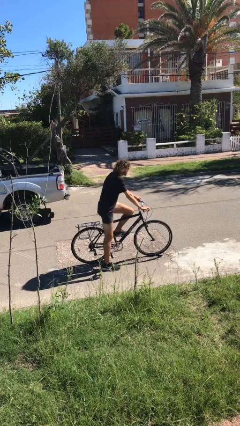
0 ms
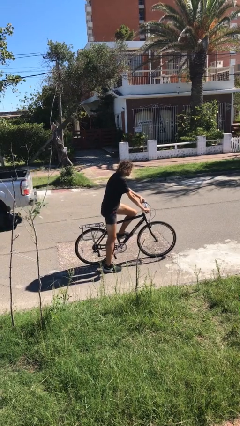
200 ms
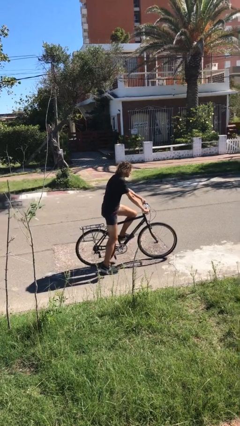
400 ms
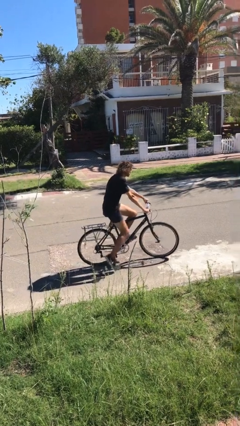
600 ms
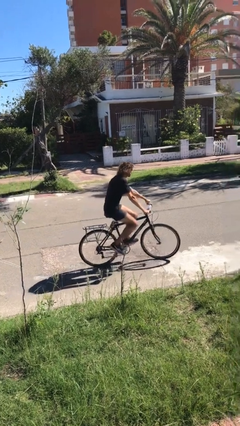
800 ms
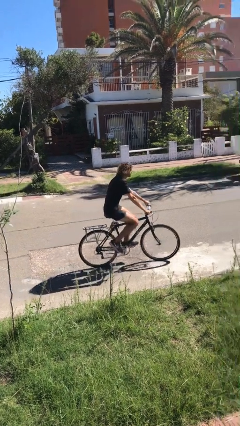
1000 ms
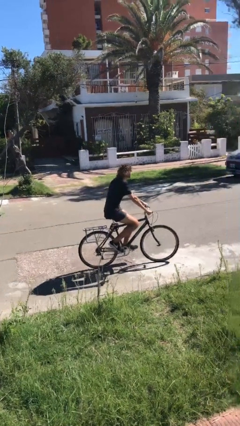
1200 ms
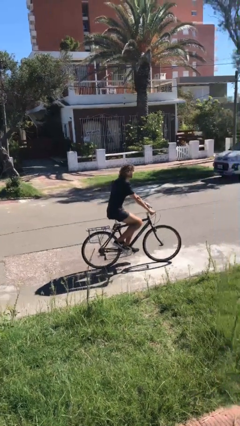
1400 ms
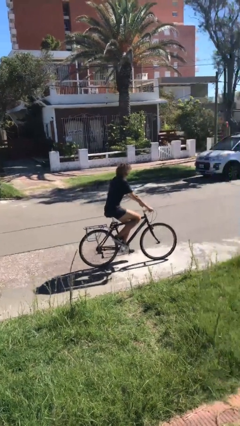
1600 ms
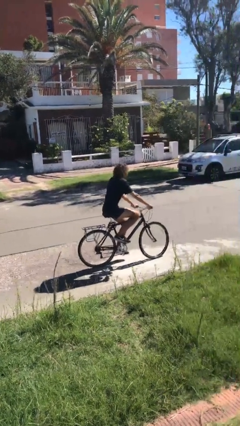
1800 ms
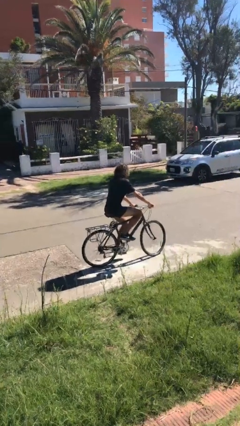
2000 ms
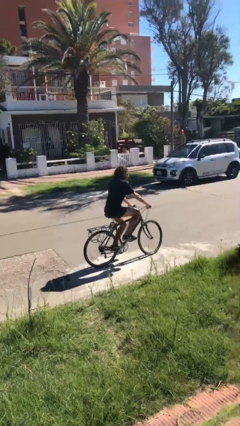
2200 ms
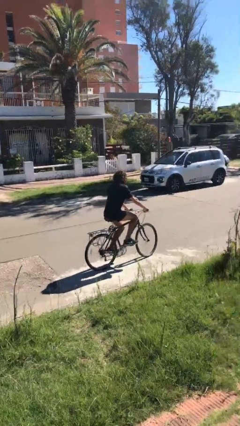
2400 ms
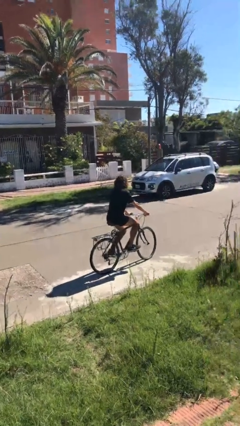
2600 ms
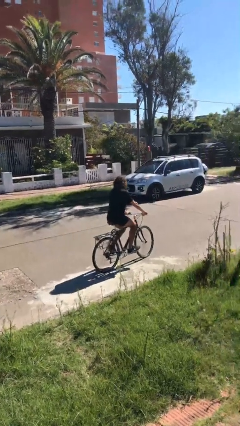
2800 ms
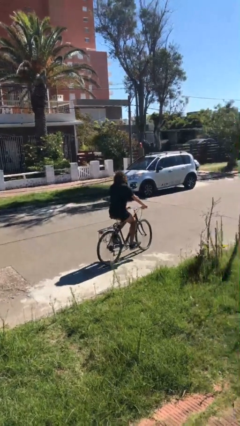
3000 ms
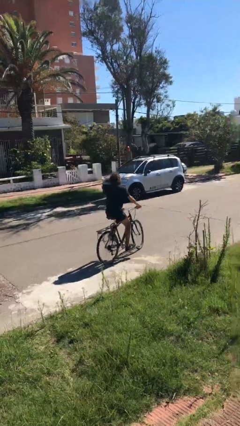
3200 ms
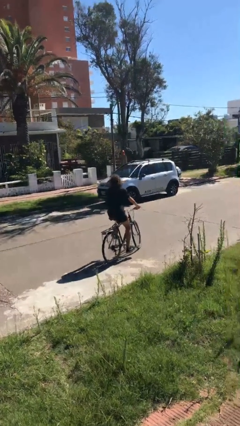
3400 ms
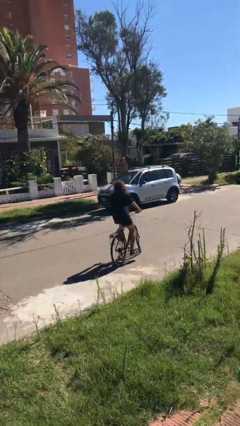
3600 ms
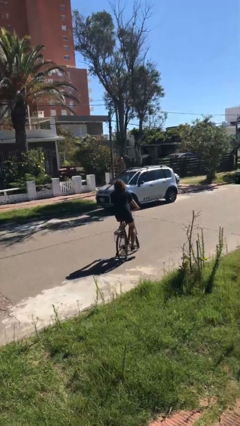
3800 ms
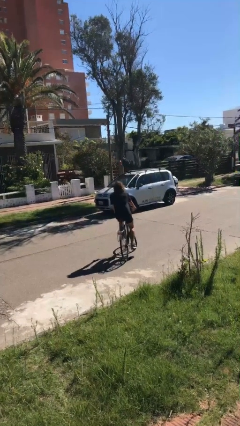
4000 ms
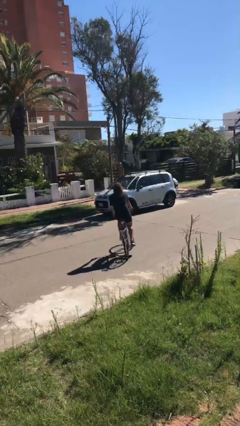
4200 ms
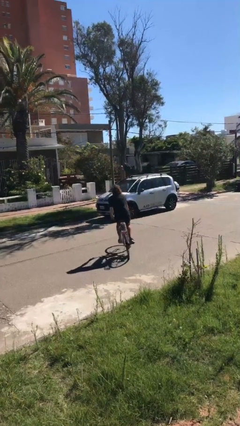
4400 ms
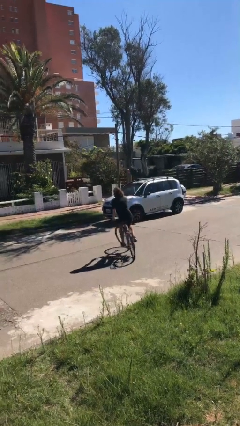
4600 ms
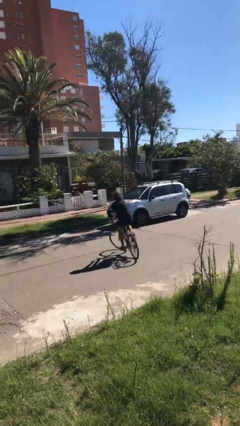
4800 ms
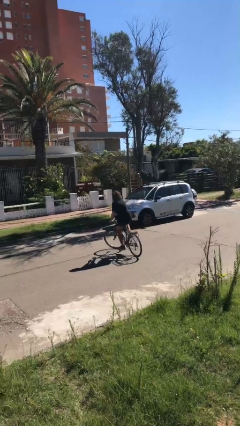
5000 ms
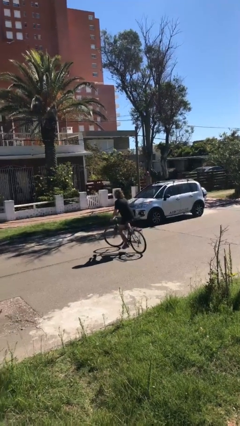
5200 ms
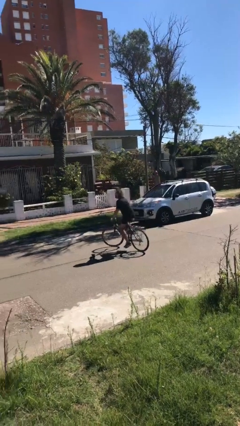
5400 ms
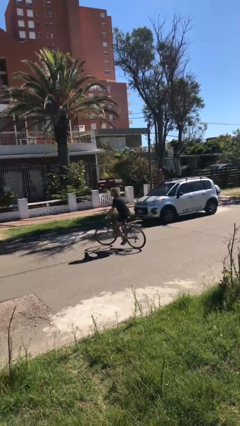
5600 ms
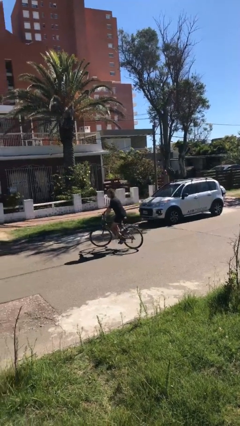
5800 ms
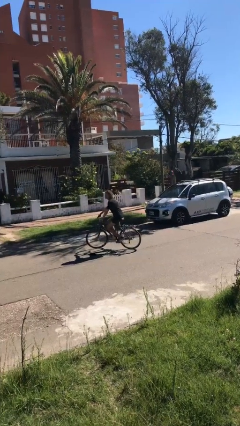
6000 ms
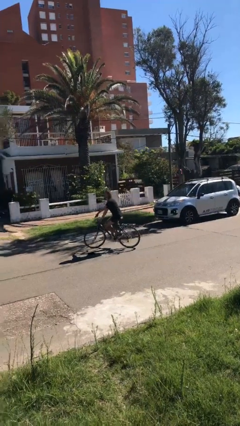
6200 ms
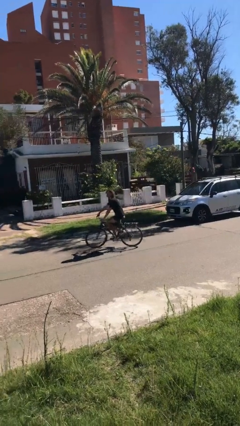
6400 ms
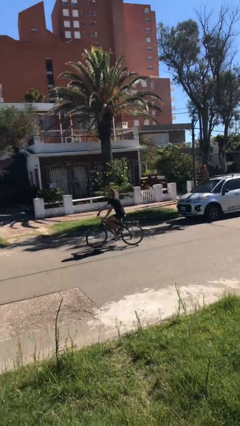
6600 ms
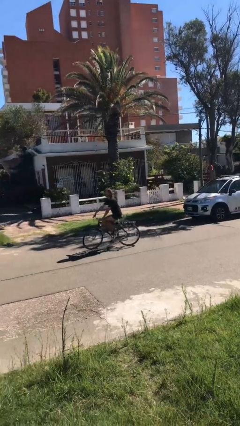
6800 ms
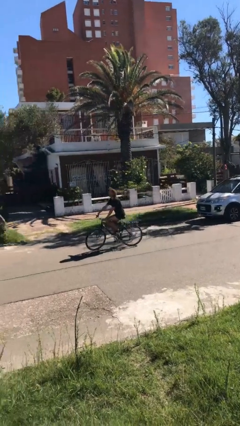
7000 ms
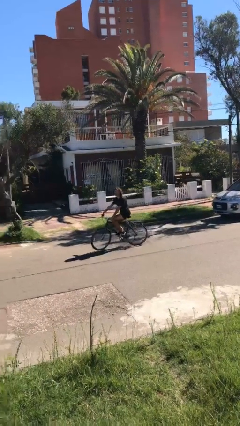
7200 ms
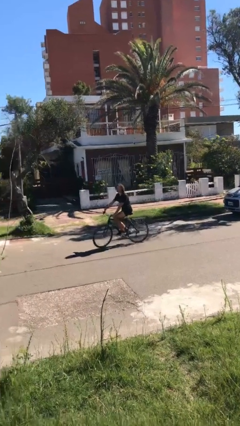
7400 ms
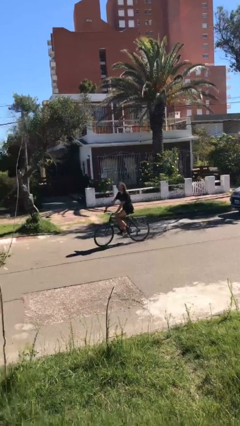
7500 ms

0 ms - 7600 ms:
person rides bicycle

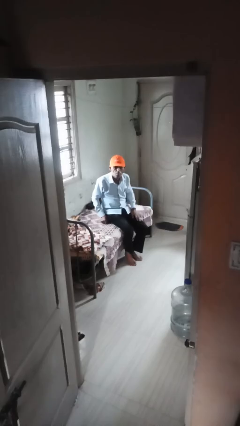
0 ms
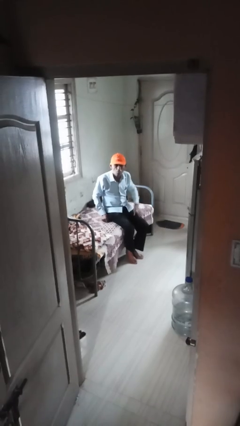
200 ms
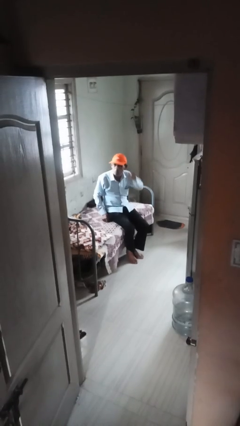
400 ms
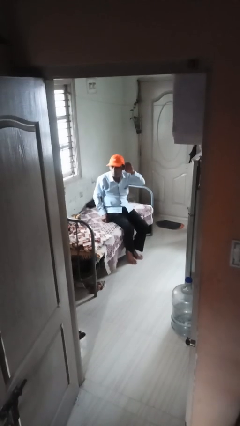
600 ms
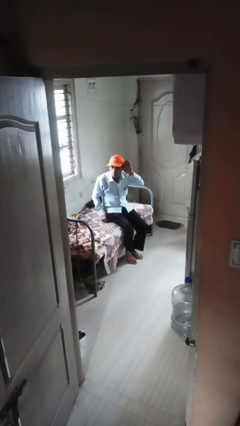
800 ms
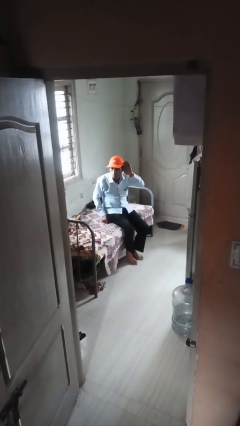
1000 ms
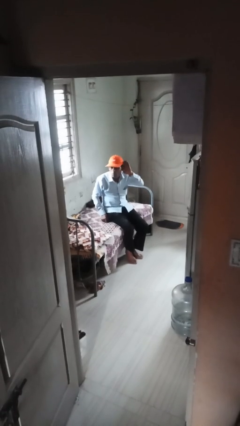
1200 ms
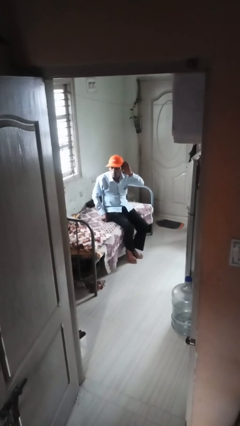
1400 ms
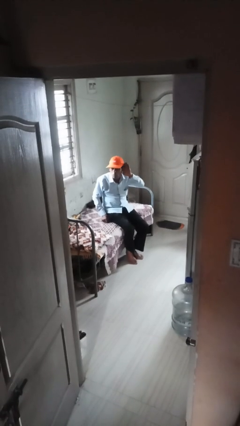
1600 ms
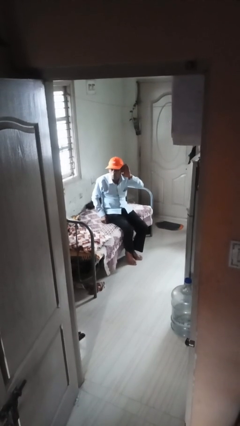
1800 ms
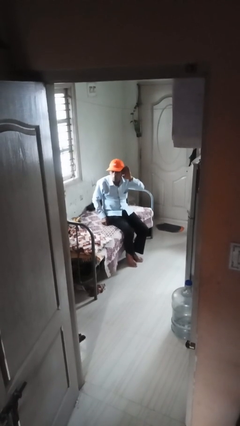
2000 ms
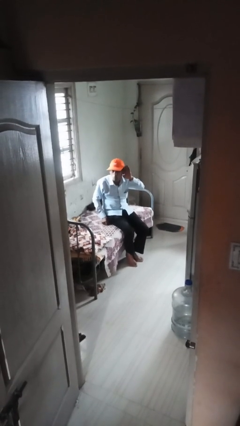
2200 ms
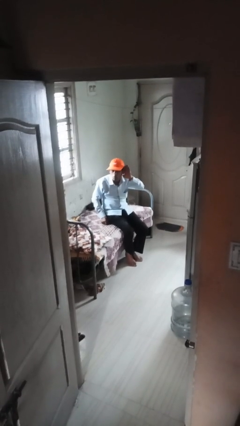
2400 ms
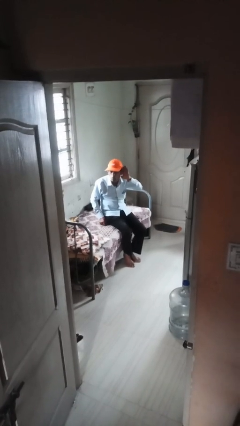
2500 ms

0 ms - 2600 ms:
person gestures listen closely

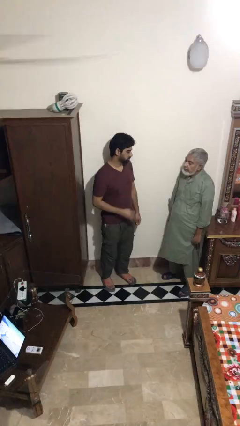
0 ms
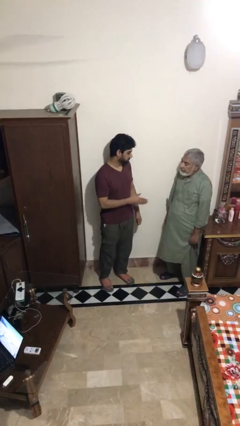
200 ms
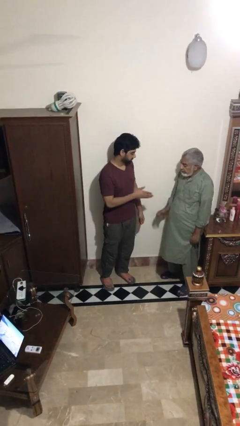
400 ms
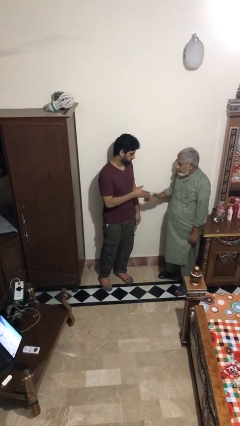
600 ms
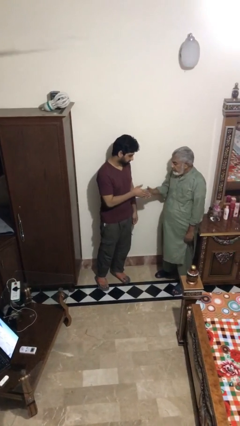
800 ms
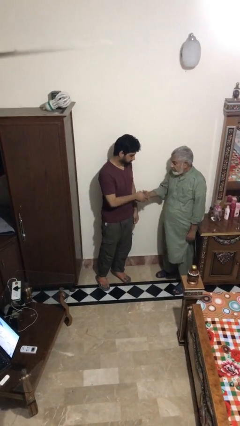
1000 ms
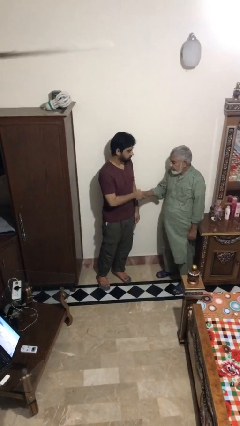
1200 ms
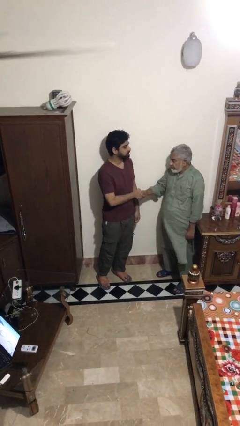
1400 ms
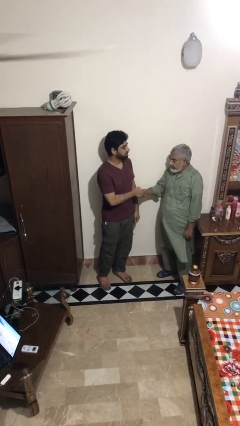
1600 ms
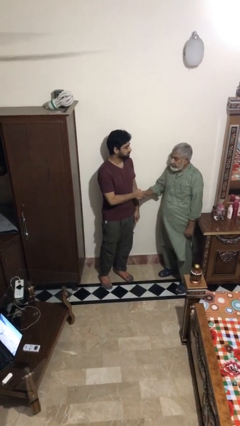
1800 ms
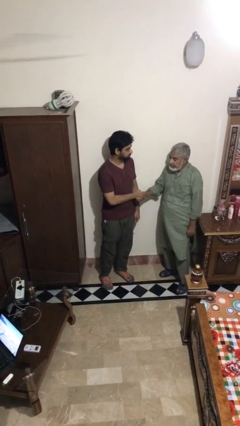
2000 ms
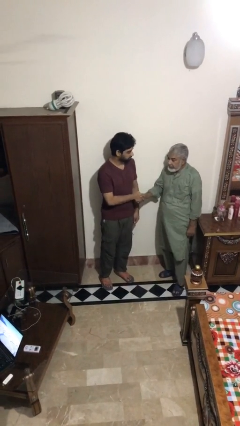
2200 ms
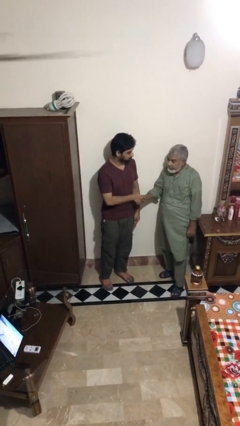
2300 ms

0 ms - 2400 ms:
person shakes hand

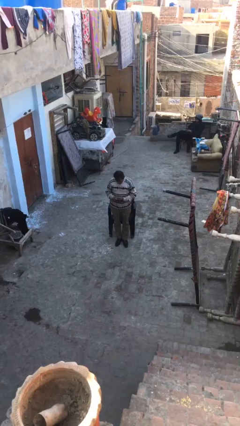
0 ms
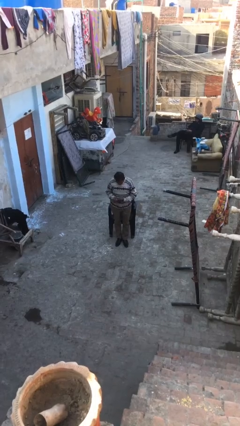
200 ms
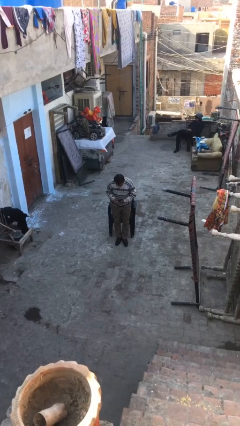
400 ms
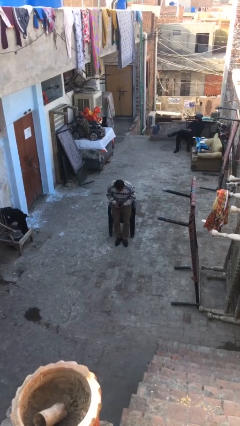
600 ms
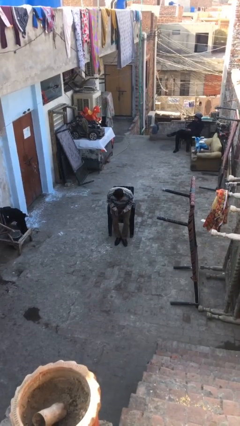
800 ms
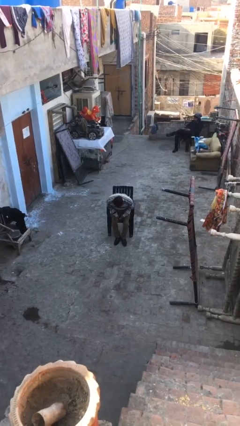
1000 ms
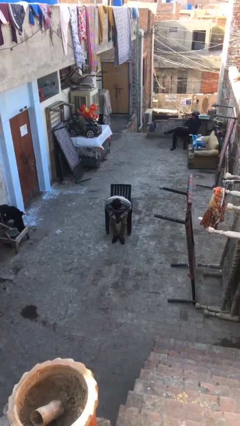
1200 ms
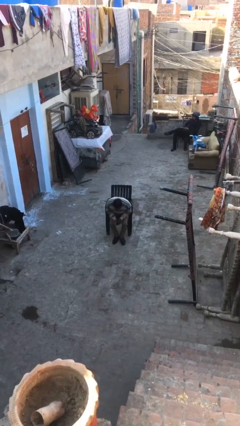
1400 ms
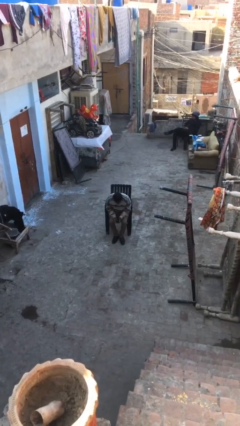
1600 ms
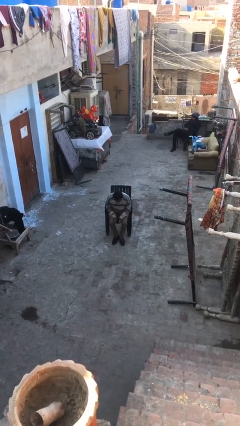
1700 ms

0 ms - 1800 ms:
person sits down

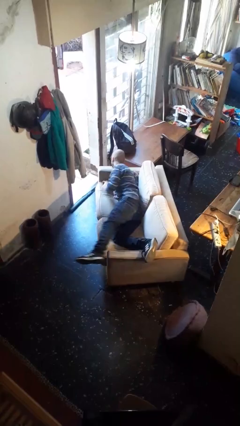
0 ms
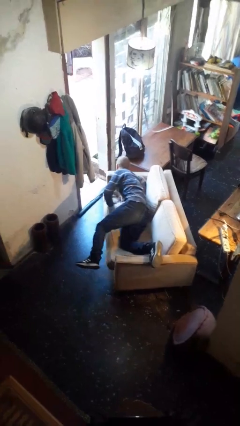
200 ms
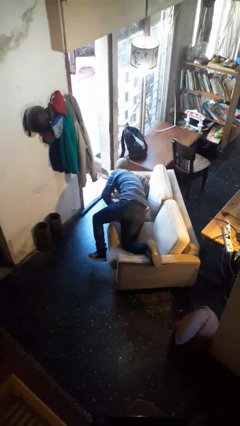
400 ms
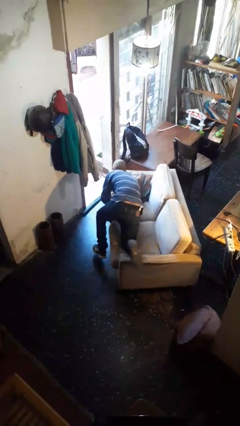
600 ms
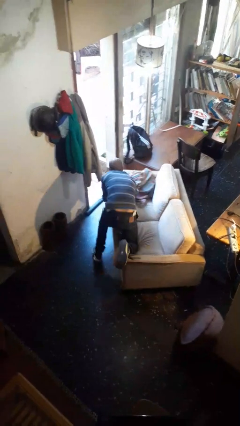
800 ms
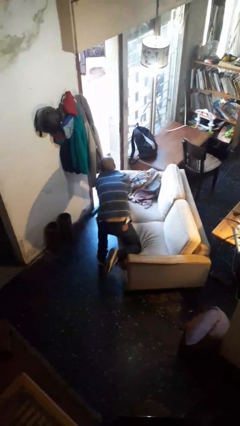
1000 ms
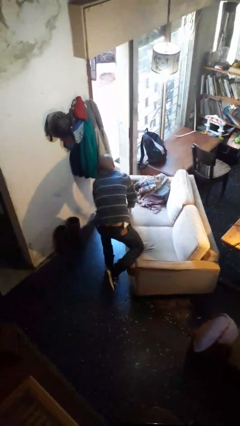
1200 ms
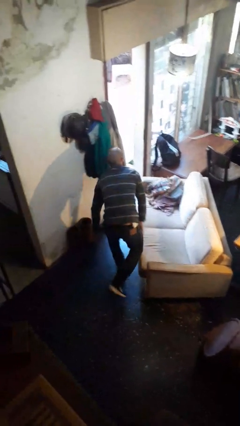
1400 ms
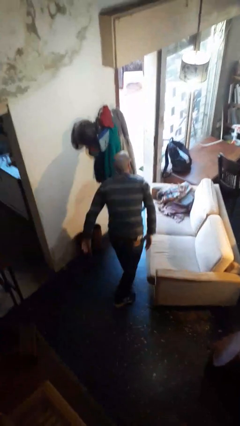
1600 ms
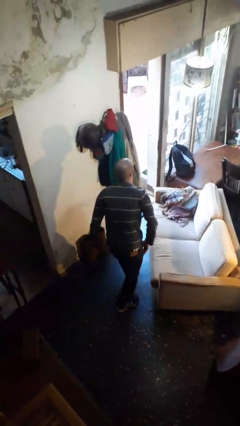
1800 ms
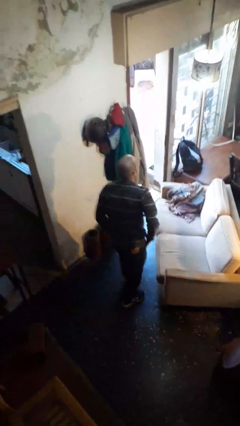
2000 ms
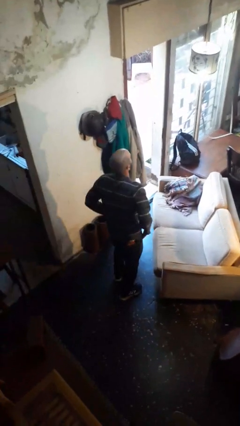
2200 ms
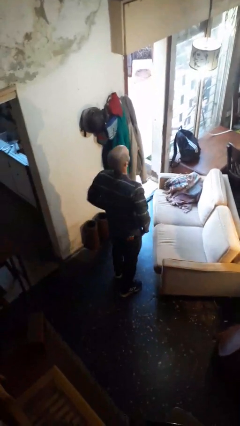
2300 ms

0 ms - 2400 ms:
person stands up

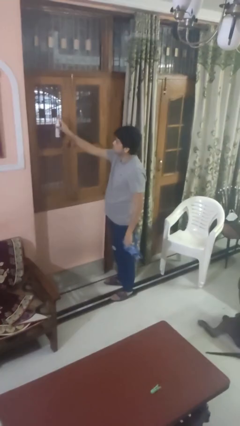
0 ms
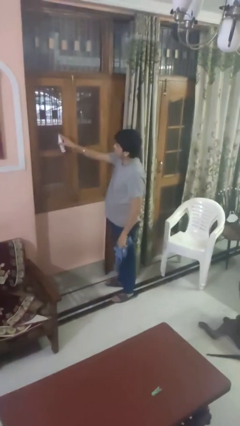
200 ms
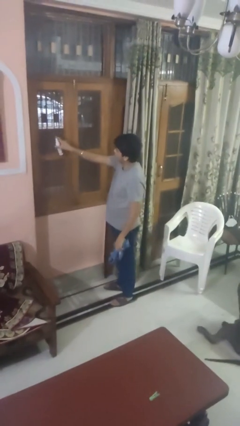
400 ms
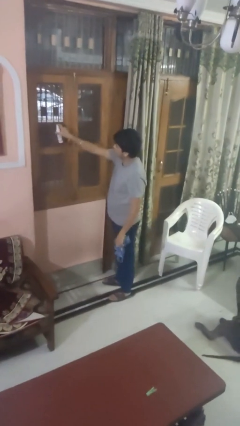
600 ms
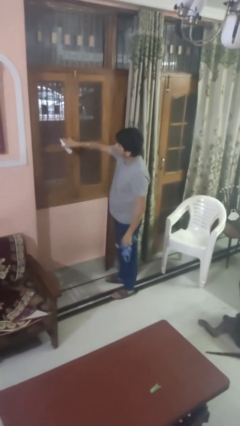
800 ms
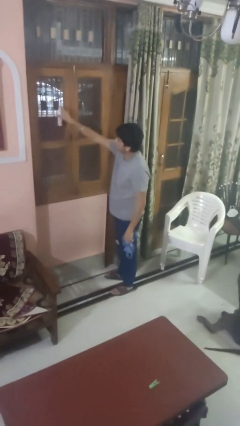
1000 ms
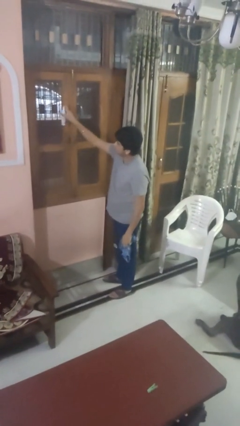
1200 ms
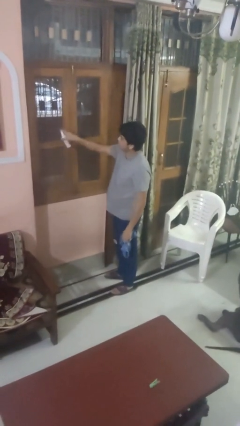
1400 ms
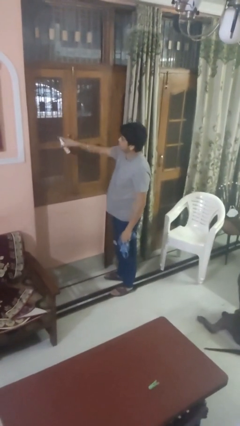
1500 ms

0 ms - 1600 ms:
person sprays from bottle
